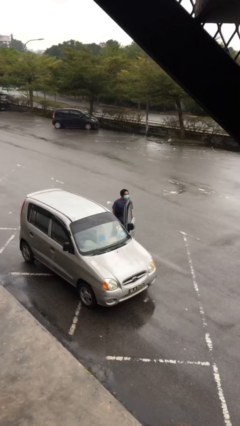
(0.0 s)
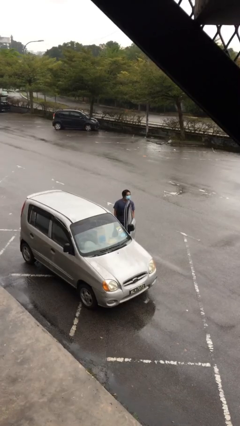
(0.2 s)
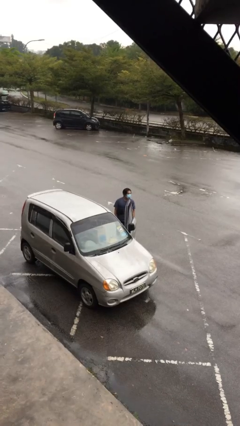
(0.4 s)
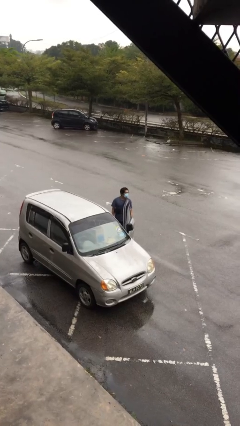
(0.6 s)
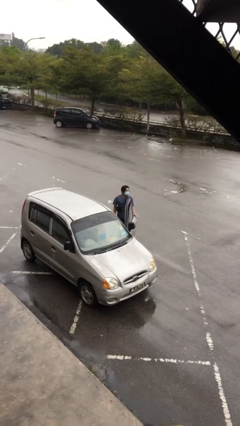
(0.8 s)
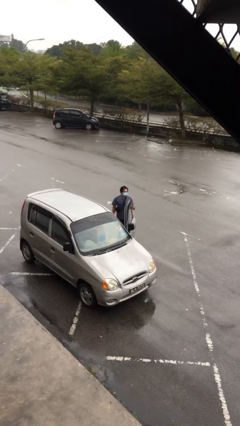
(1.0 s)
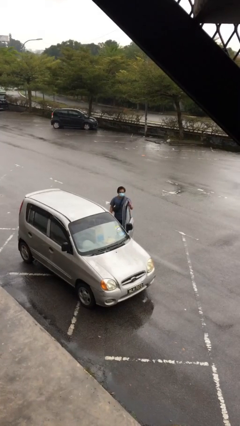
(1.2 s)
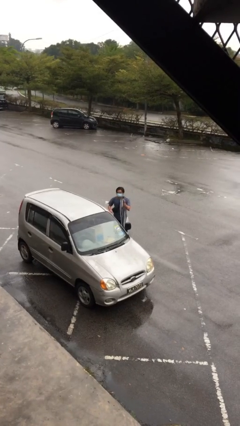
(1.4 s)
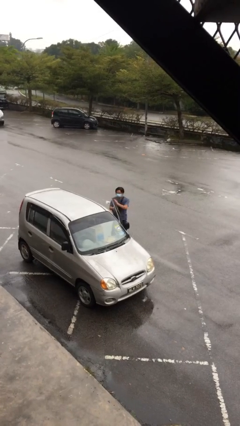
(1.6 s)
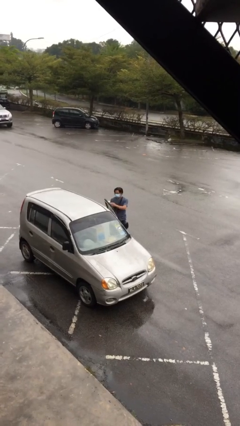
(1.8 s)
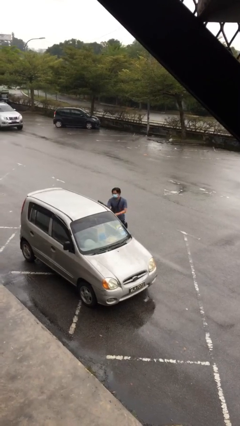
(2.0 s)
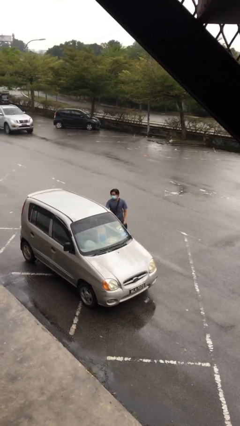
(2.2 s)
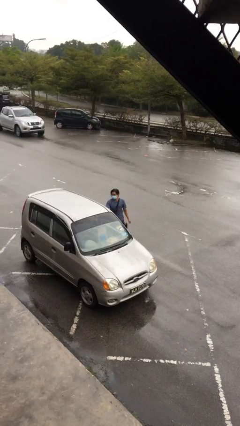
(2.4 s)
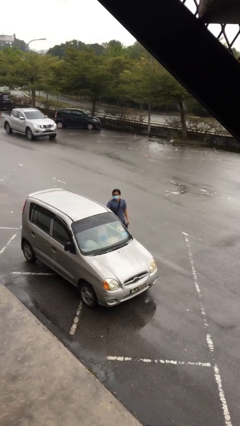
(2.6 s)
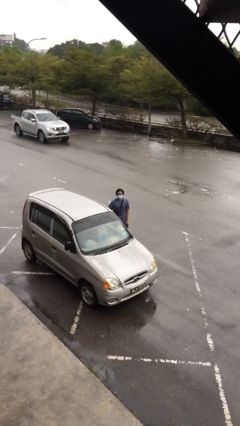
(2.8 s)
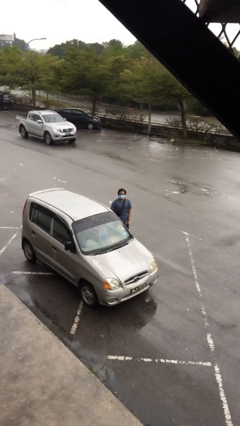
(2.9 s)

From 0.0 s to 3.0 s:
person closes car door

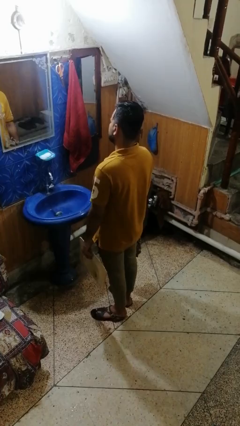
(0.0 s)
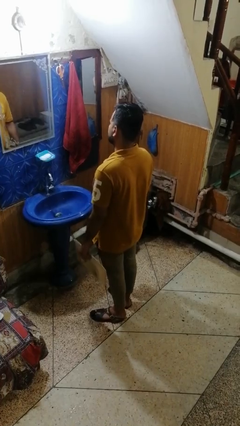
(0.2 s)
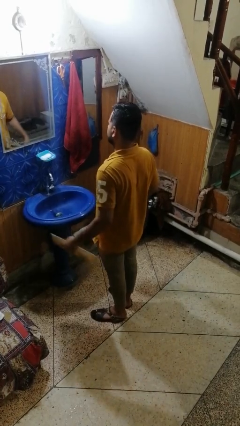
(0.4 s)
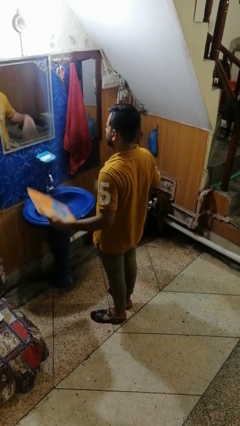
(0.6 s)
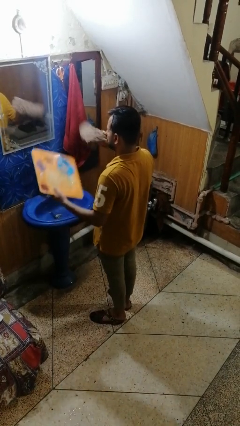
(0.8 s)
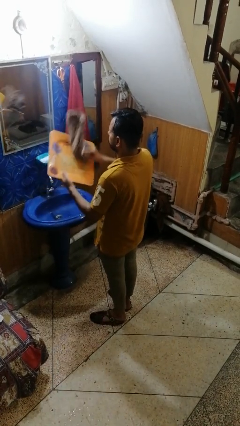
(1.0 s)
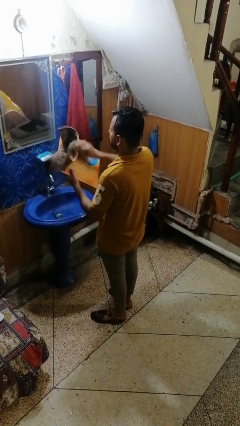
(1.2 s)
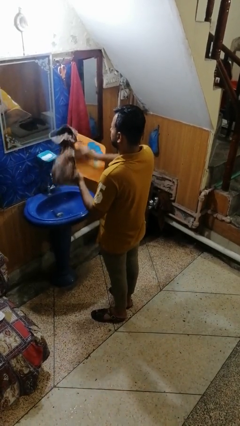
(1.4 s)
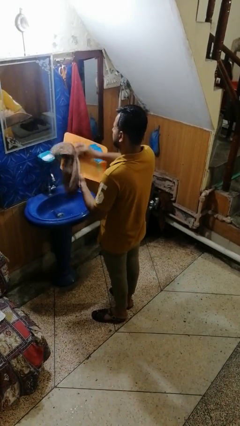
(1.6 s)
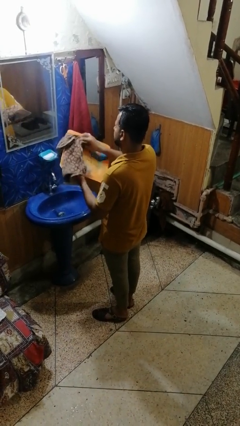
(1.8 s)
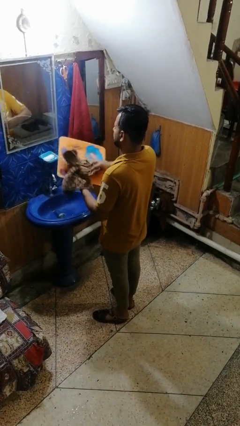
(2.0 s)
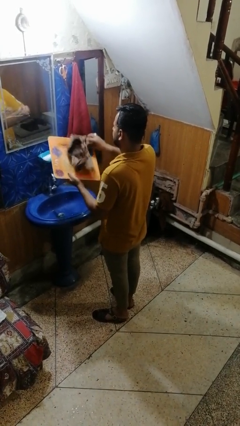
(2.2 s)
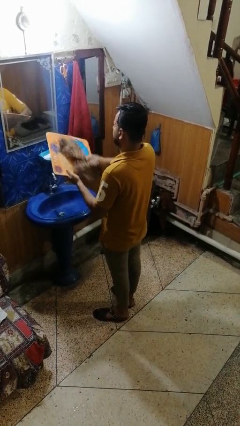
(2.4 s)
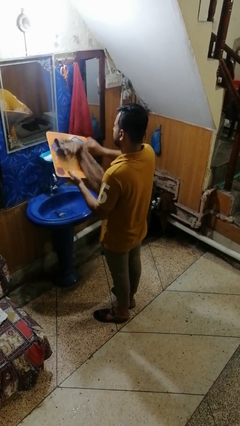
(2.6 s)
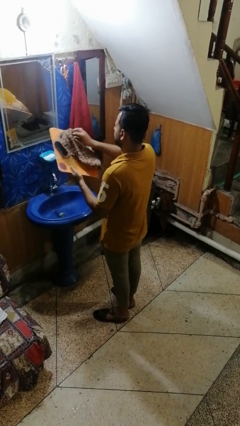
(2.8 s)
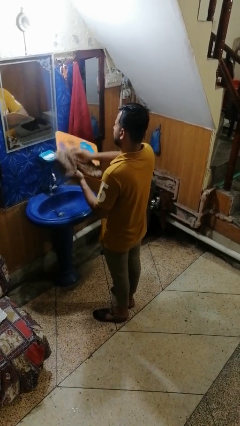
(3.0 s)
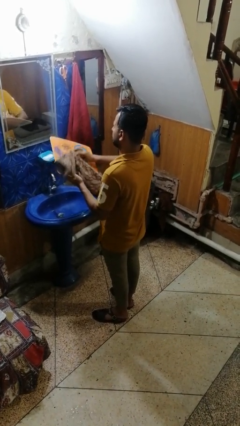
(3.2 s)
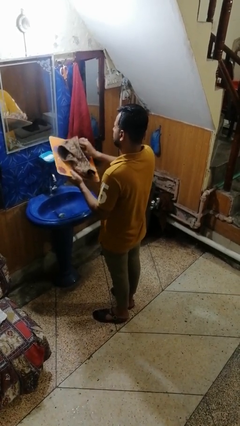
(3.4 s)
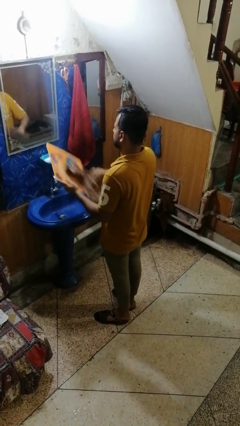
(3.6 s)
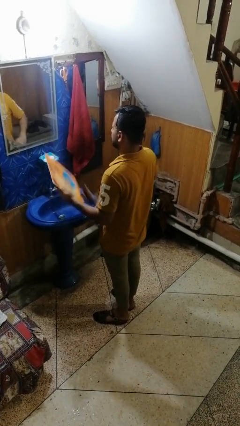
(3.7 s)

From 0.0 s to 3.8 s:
person dries dish

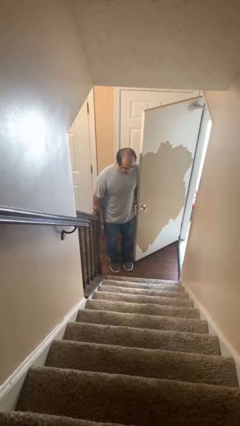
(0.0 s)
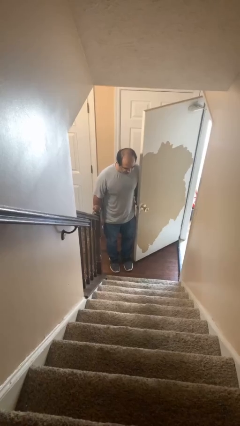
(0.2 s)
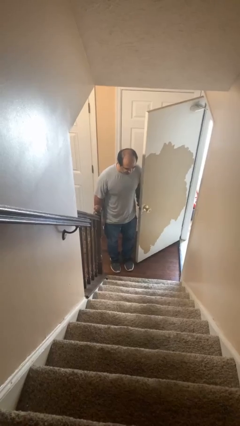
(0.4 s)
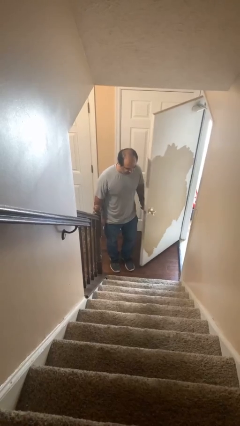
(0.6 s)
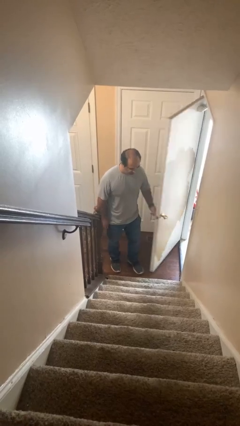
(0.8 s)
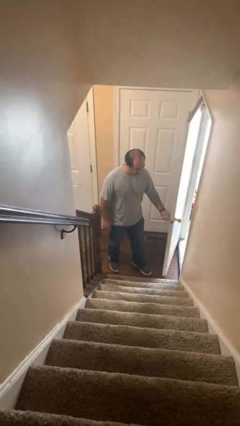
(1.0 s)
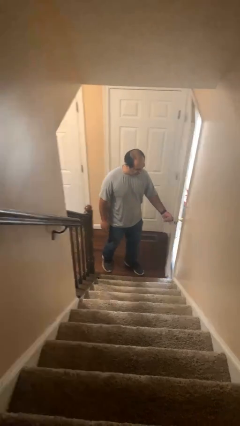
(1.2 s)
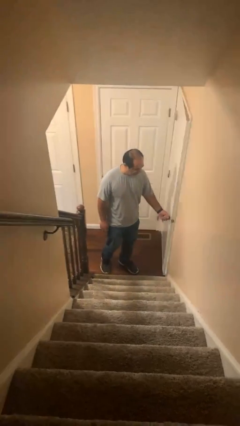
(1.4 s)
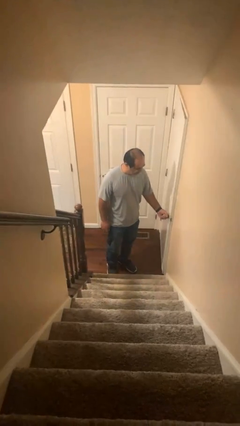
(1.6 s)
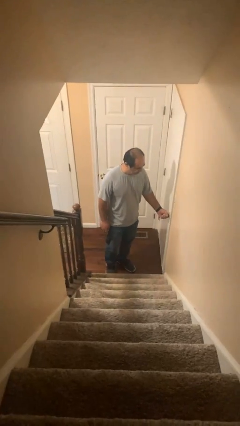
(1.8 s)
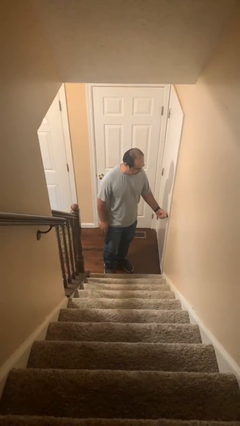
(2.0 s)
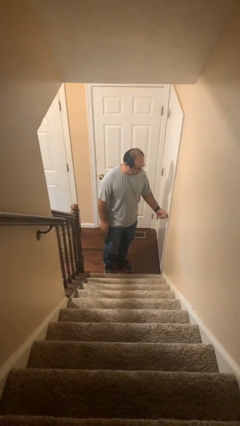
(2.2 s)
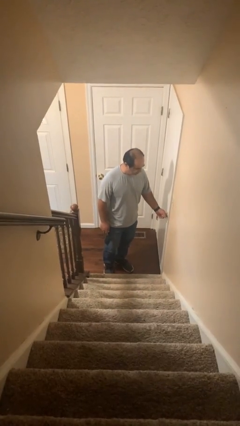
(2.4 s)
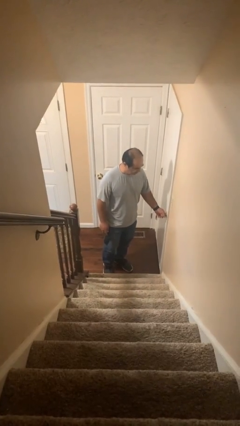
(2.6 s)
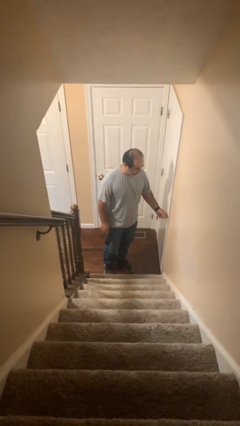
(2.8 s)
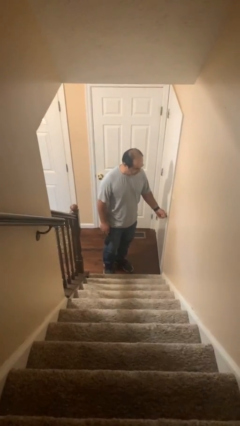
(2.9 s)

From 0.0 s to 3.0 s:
person closes facility door

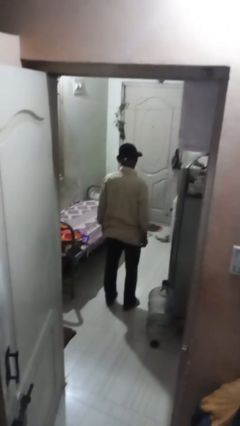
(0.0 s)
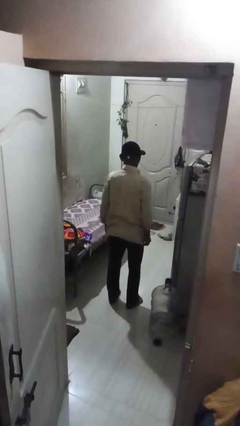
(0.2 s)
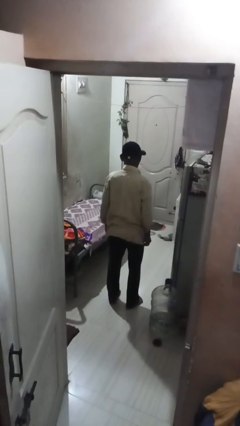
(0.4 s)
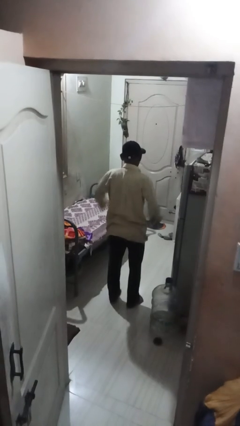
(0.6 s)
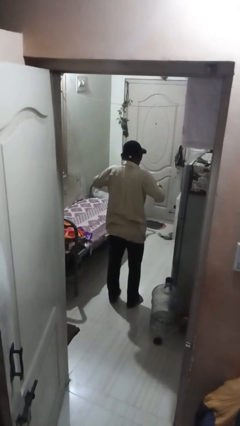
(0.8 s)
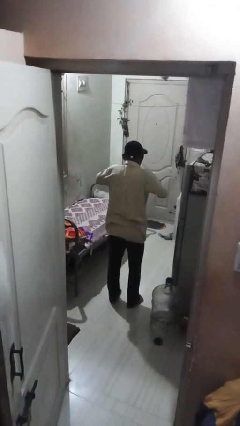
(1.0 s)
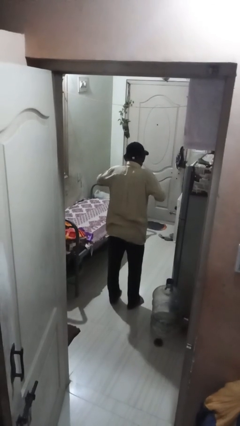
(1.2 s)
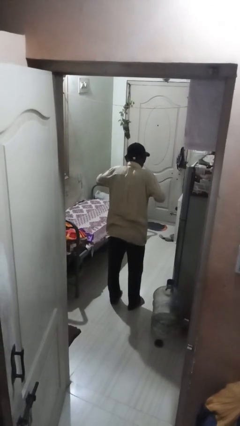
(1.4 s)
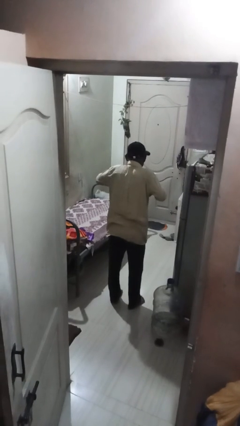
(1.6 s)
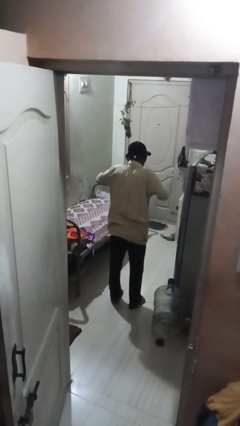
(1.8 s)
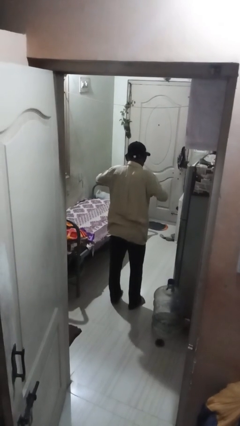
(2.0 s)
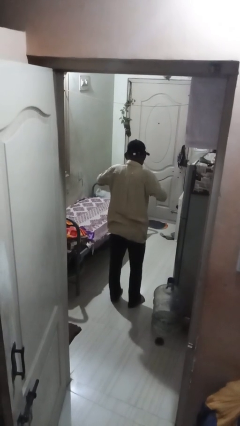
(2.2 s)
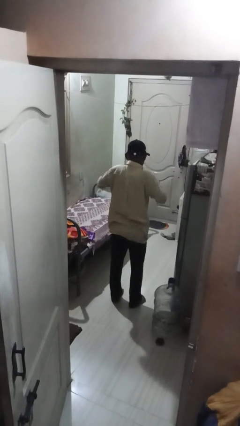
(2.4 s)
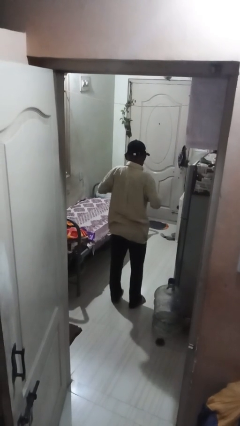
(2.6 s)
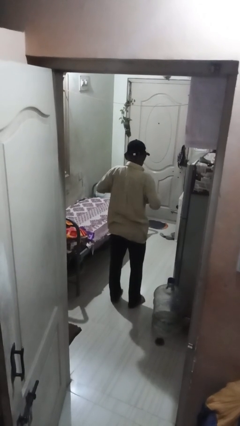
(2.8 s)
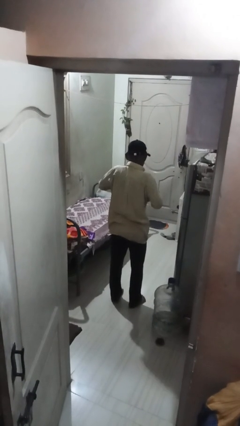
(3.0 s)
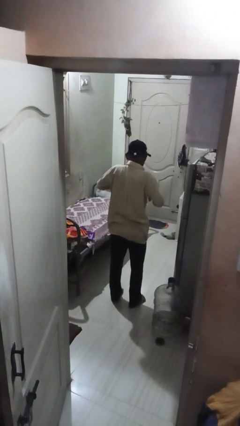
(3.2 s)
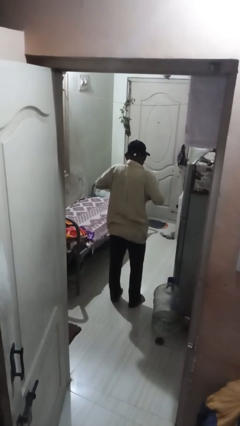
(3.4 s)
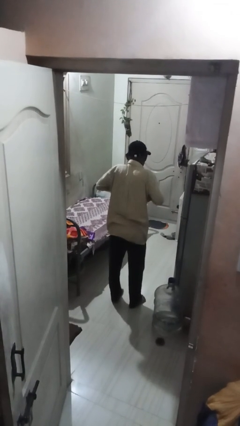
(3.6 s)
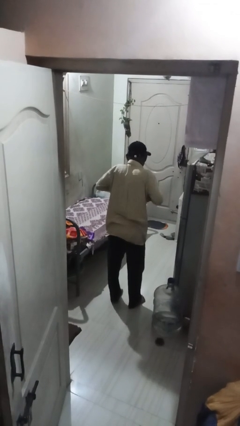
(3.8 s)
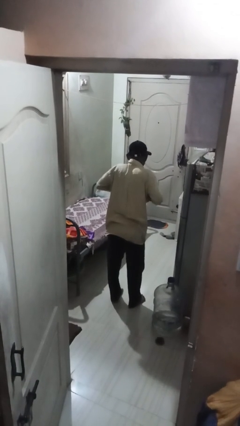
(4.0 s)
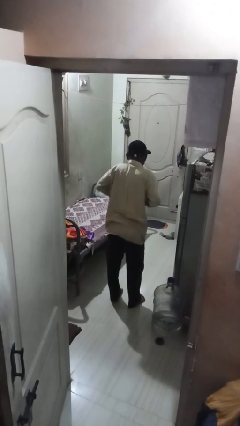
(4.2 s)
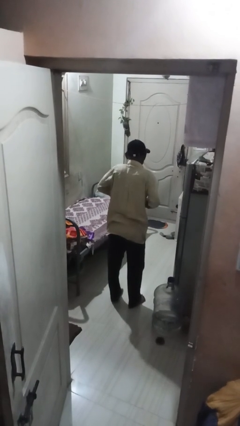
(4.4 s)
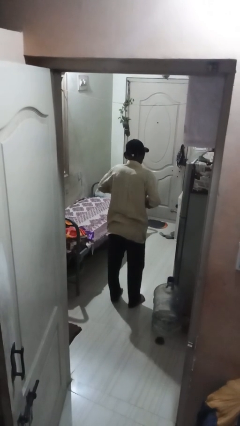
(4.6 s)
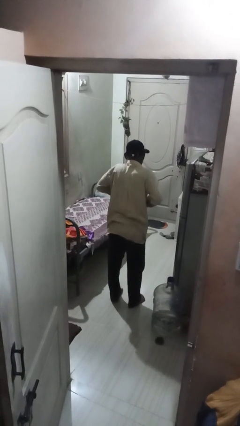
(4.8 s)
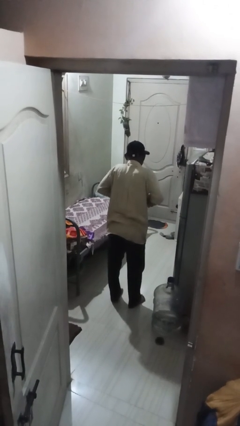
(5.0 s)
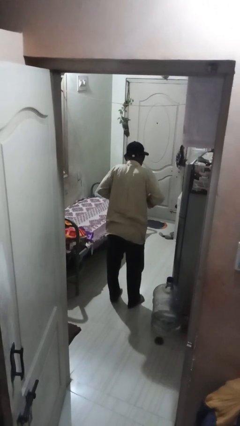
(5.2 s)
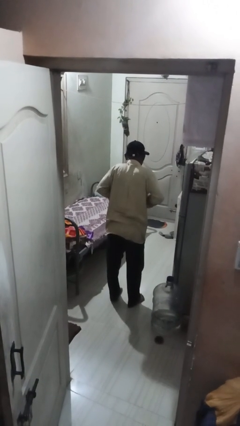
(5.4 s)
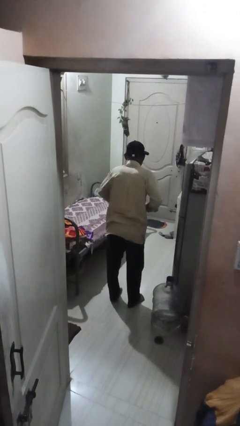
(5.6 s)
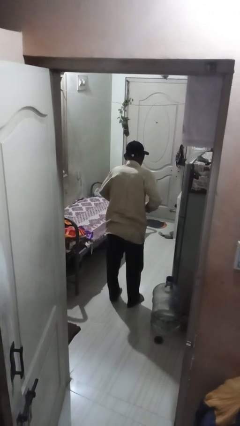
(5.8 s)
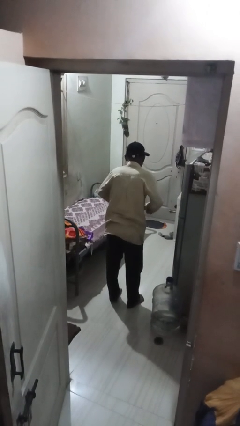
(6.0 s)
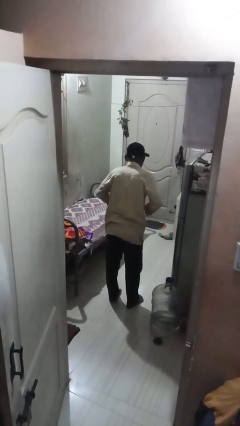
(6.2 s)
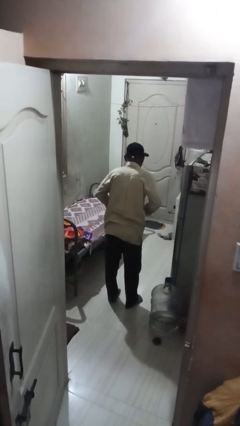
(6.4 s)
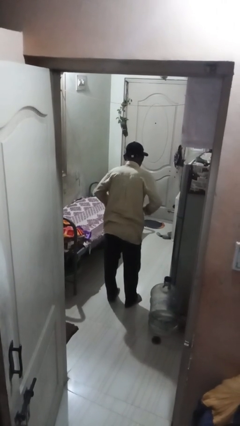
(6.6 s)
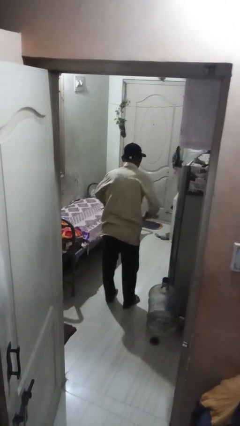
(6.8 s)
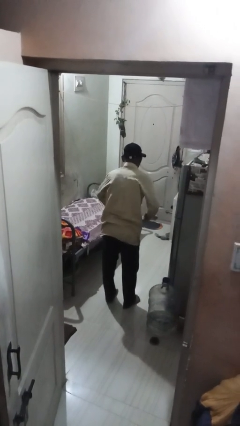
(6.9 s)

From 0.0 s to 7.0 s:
person unbuttons shirt

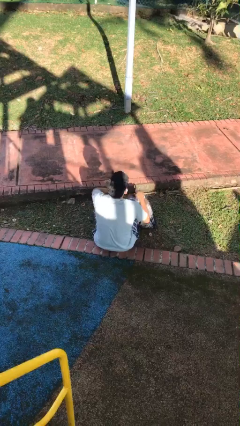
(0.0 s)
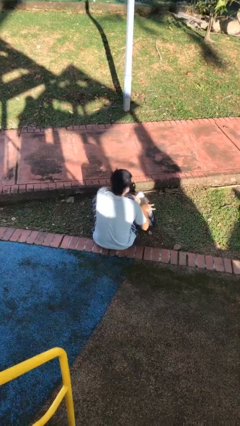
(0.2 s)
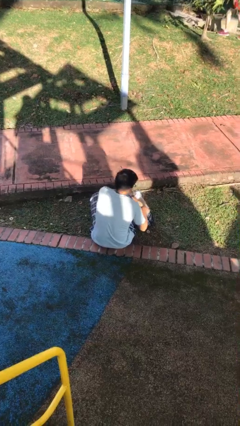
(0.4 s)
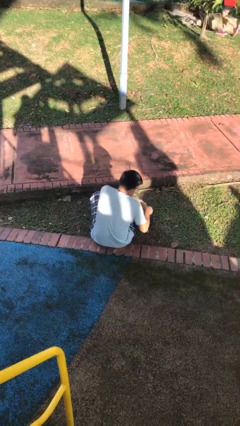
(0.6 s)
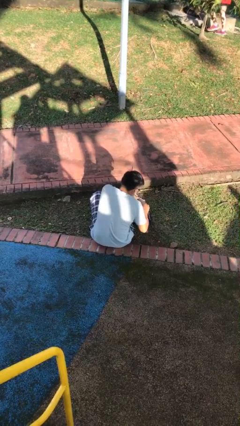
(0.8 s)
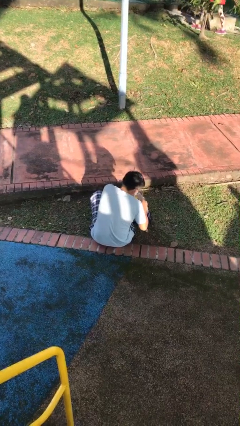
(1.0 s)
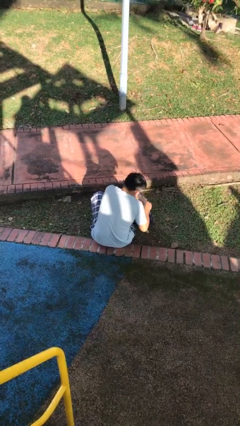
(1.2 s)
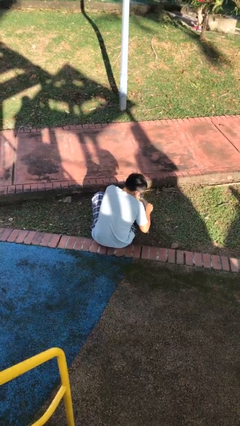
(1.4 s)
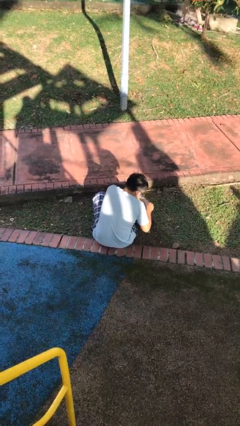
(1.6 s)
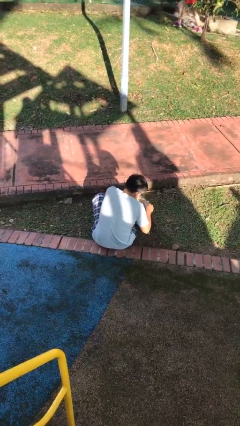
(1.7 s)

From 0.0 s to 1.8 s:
person searches in bag
